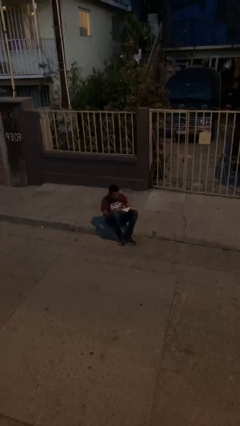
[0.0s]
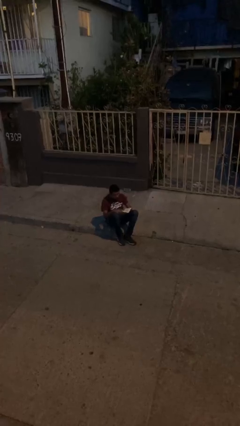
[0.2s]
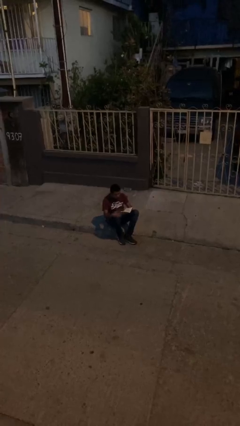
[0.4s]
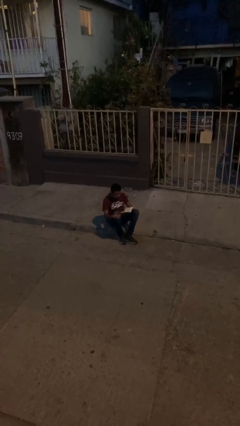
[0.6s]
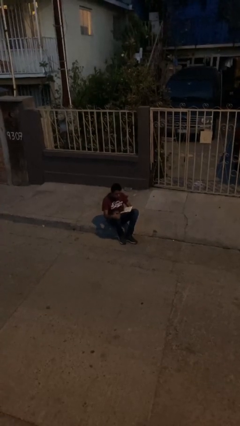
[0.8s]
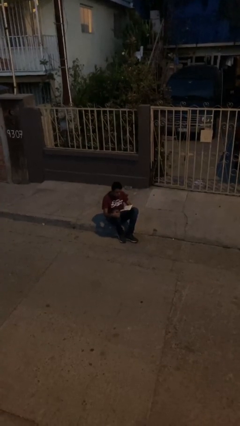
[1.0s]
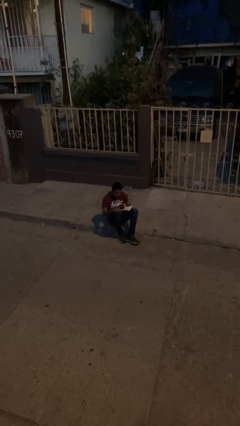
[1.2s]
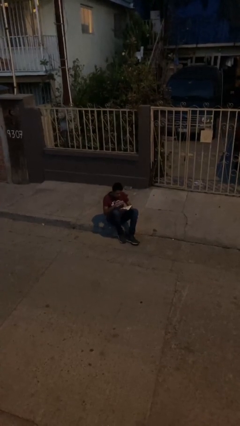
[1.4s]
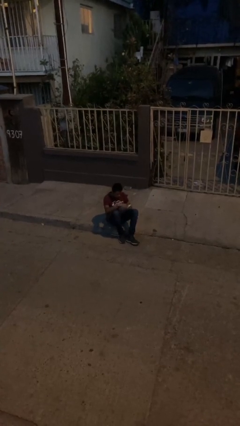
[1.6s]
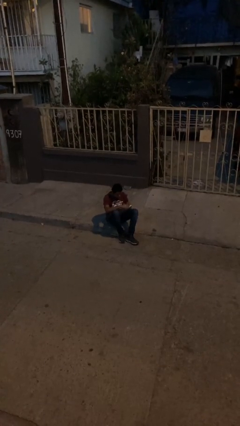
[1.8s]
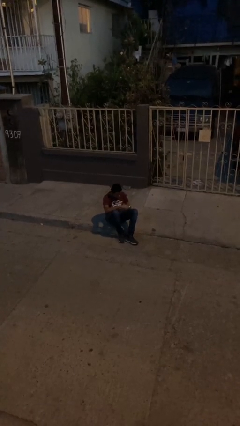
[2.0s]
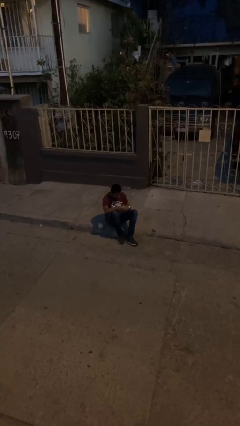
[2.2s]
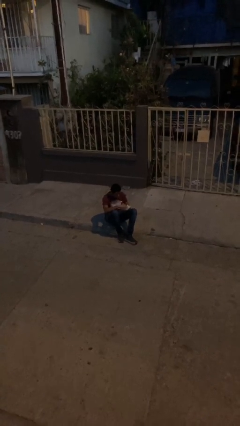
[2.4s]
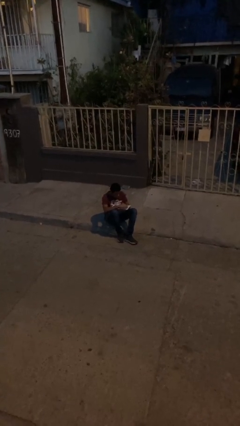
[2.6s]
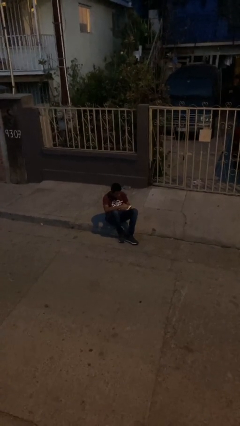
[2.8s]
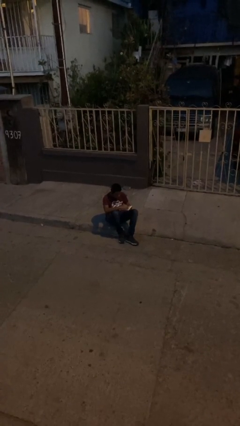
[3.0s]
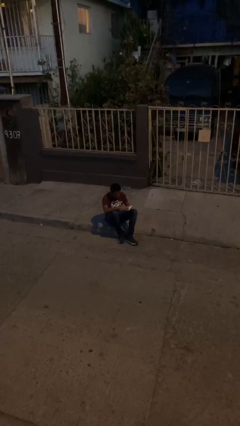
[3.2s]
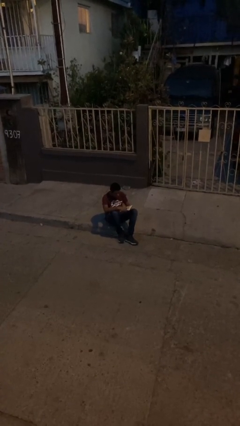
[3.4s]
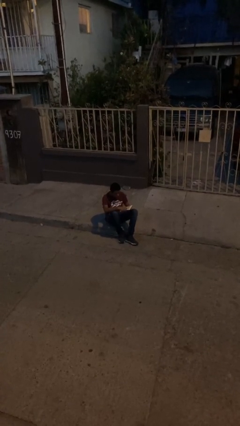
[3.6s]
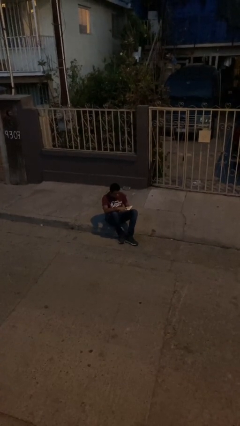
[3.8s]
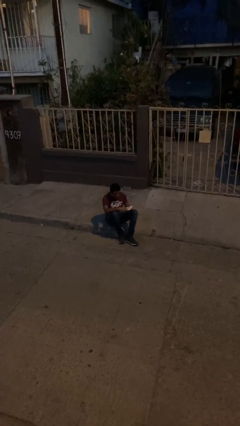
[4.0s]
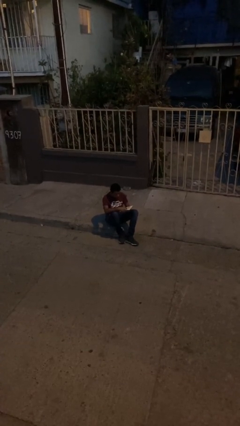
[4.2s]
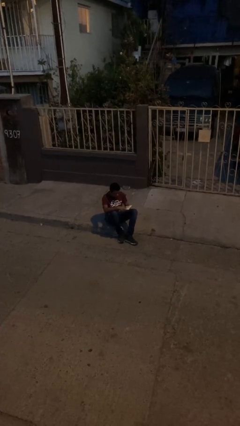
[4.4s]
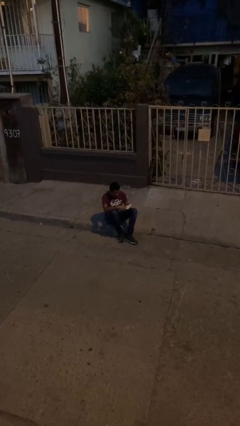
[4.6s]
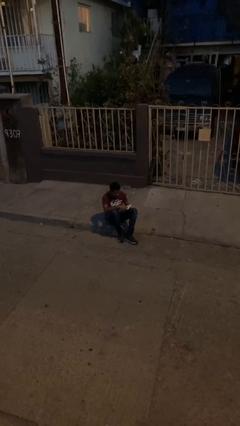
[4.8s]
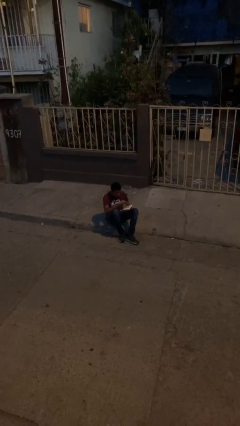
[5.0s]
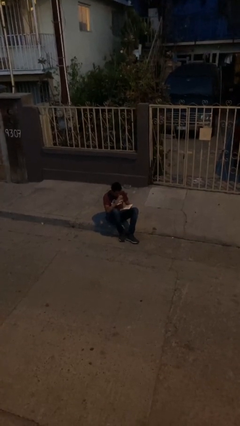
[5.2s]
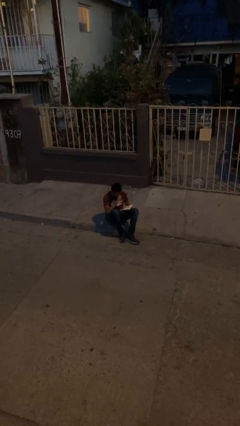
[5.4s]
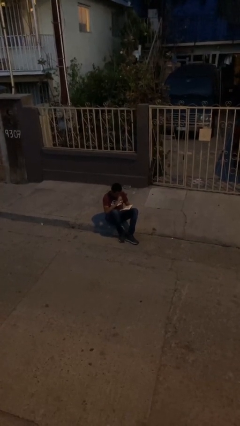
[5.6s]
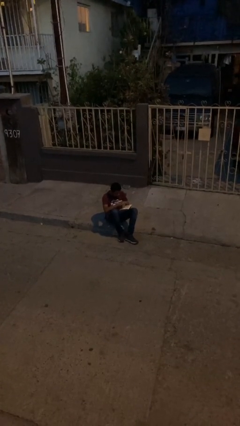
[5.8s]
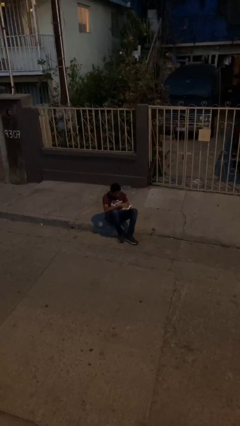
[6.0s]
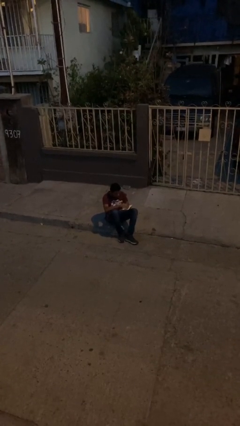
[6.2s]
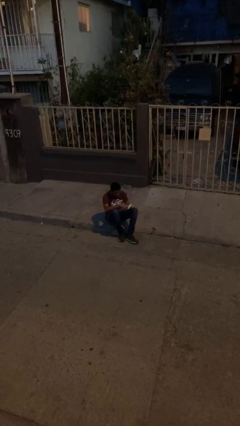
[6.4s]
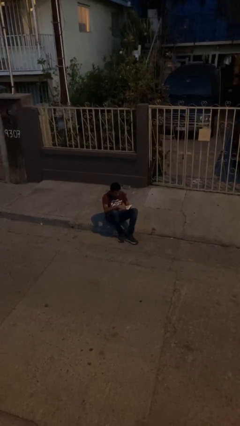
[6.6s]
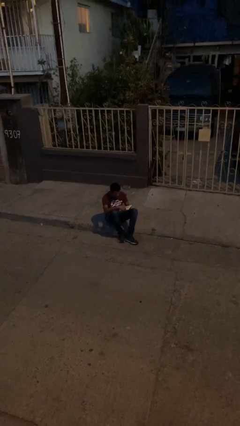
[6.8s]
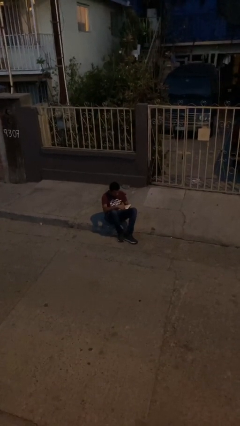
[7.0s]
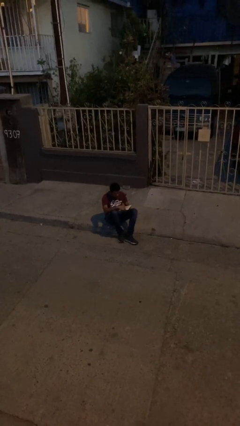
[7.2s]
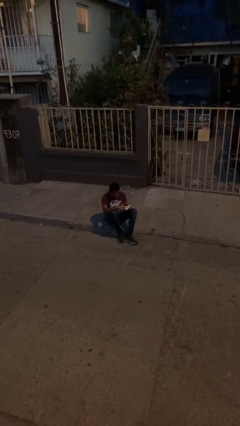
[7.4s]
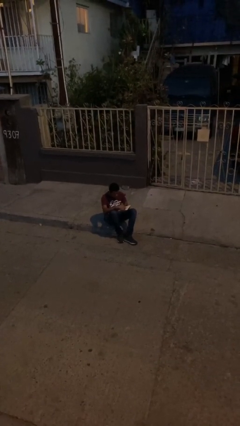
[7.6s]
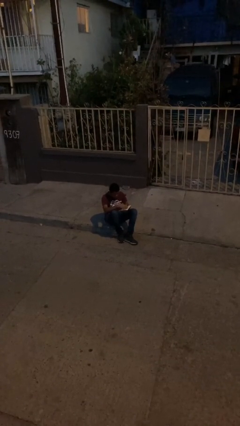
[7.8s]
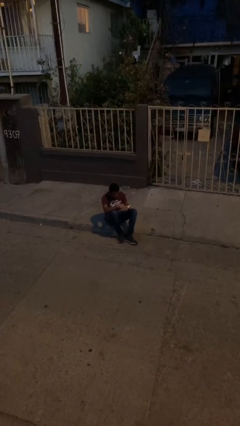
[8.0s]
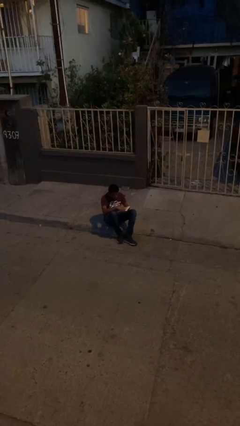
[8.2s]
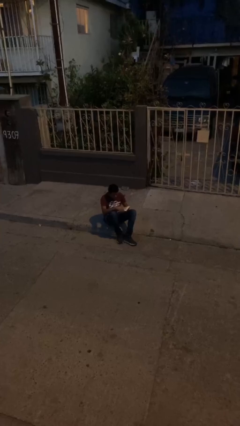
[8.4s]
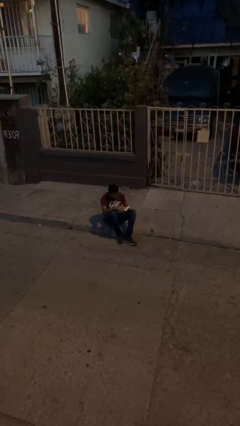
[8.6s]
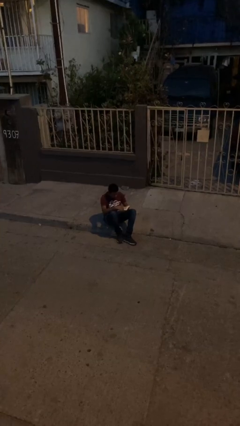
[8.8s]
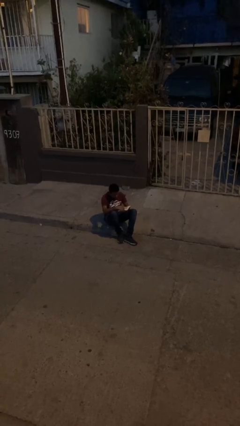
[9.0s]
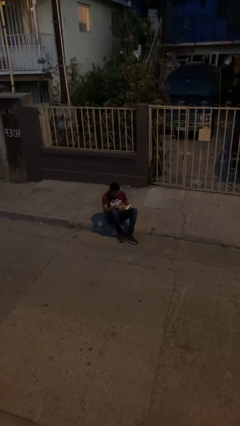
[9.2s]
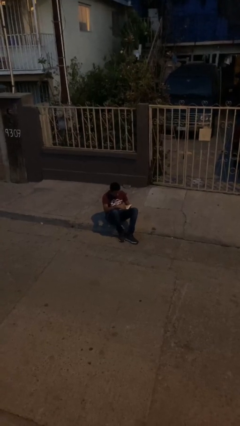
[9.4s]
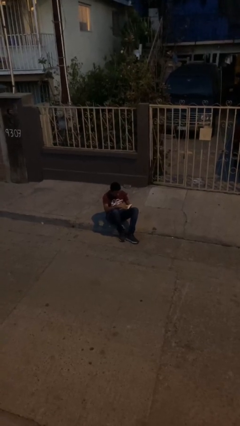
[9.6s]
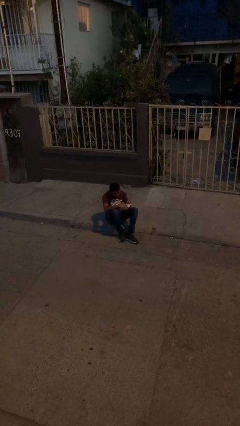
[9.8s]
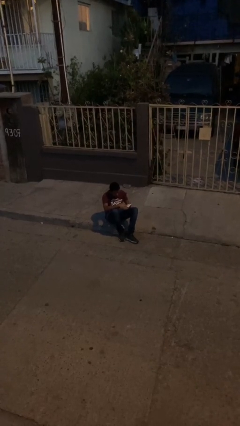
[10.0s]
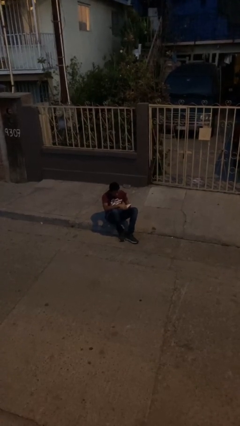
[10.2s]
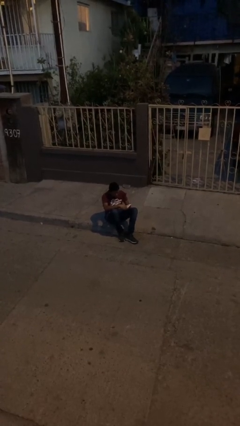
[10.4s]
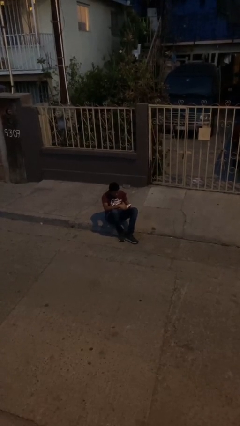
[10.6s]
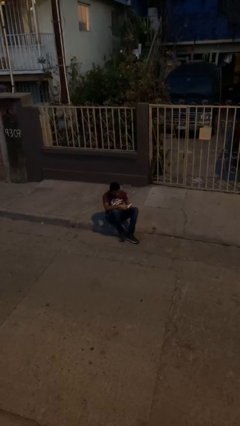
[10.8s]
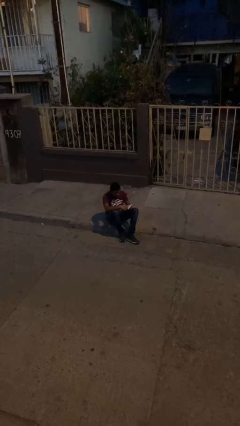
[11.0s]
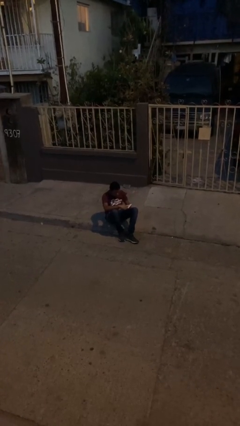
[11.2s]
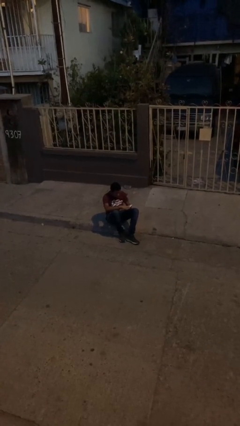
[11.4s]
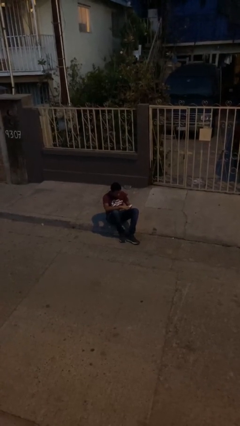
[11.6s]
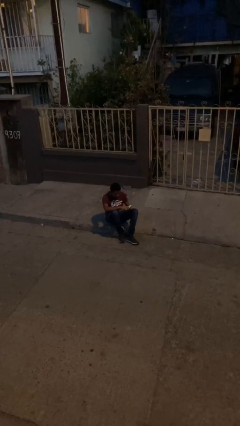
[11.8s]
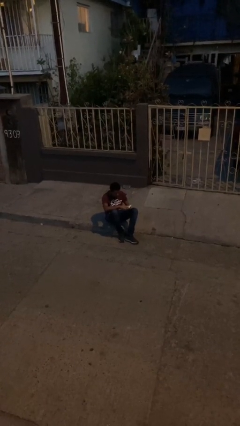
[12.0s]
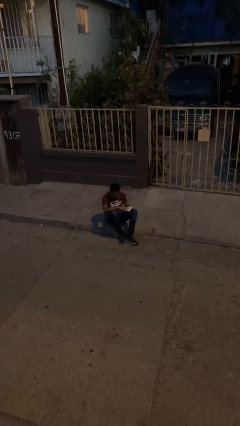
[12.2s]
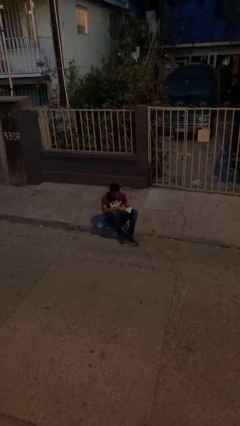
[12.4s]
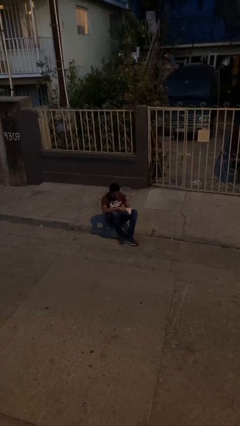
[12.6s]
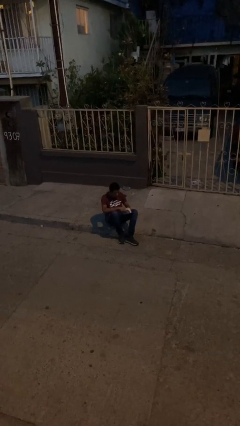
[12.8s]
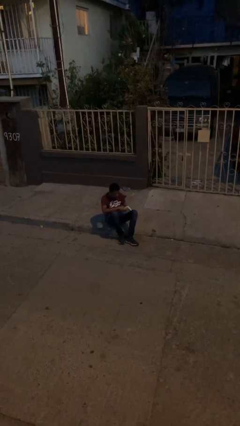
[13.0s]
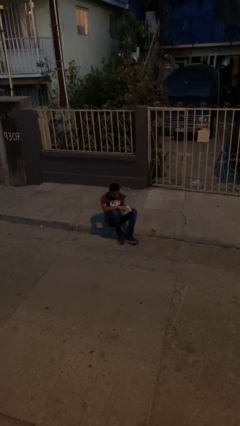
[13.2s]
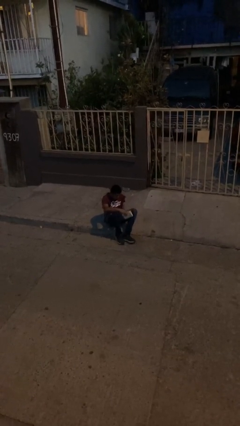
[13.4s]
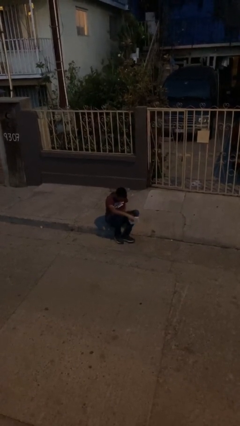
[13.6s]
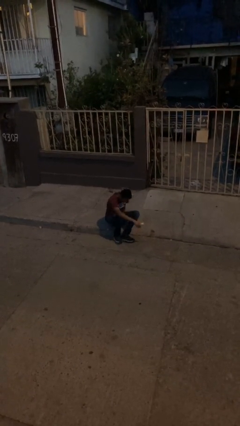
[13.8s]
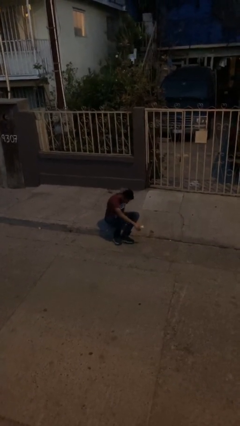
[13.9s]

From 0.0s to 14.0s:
person reads document

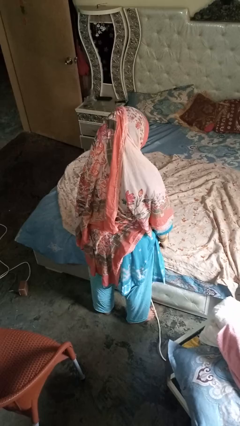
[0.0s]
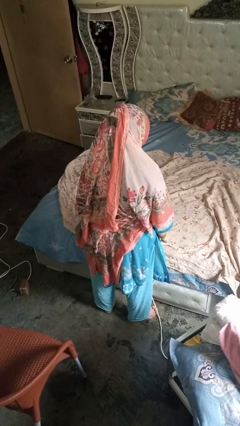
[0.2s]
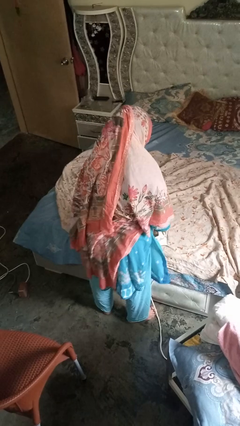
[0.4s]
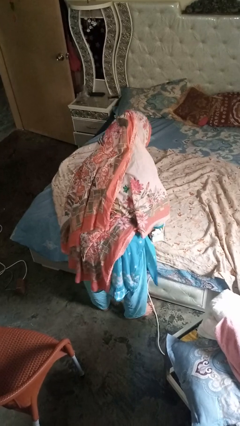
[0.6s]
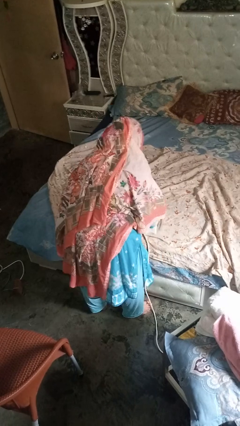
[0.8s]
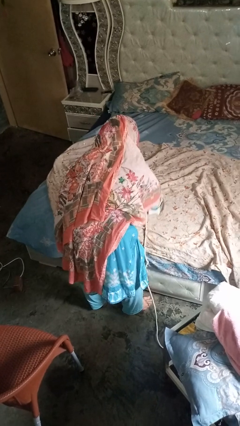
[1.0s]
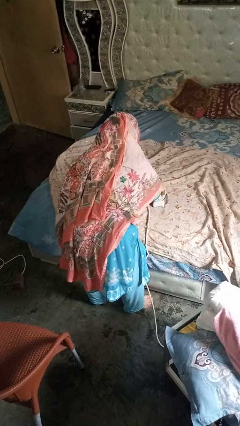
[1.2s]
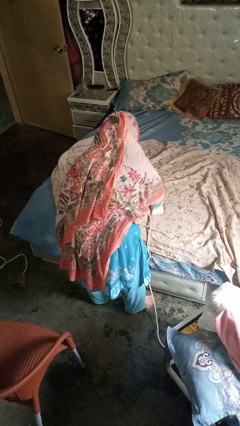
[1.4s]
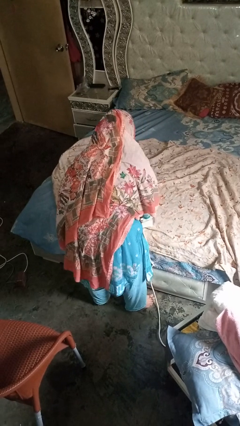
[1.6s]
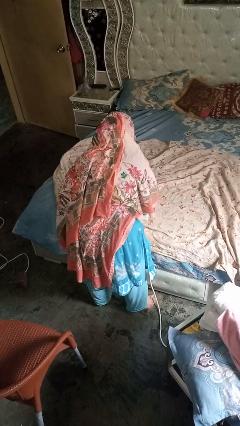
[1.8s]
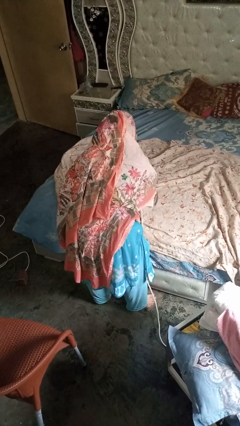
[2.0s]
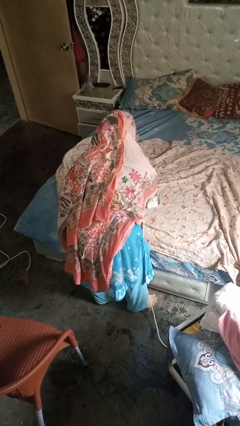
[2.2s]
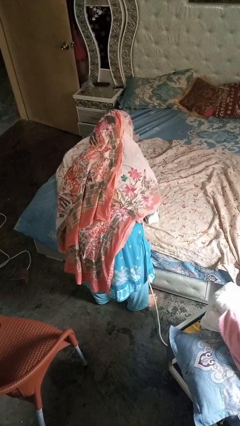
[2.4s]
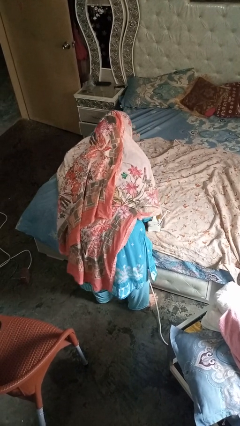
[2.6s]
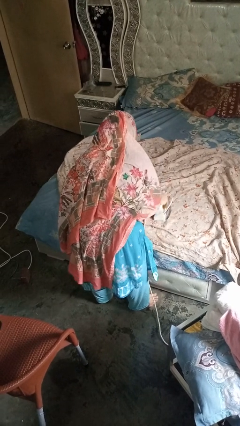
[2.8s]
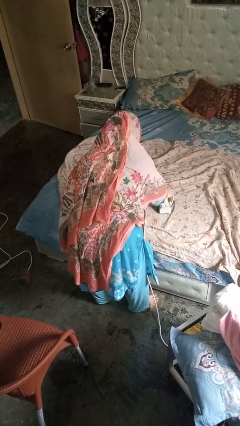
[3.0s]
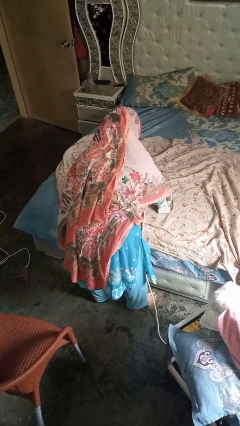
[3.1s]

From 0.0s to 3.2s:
person irons clothes

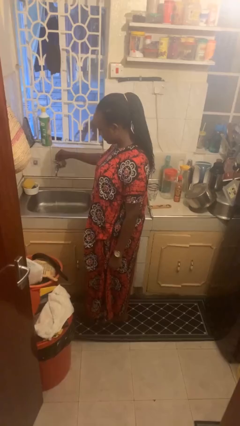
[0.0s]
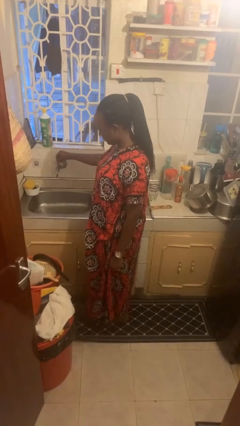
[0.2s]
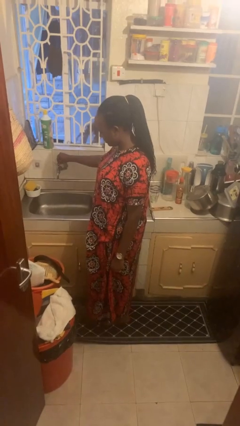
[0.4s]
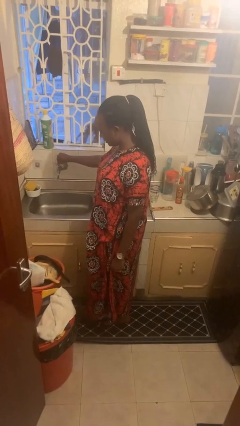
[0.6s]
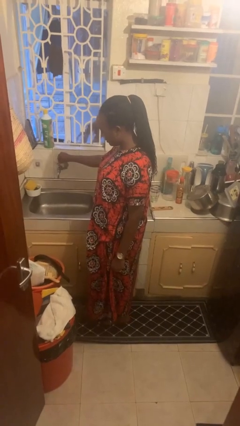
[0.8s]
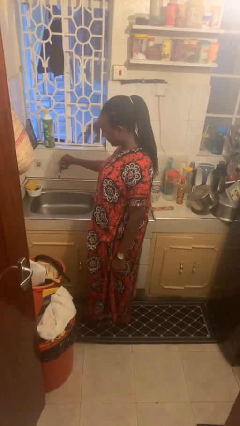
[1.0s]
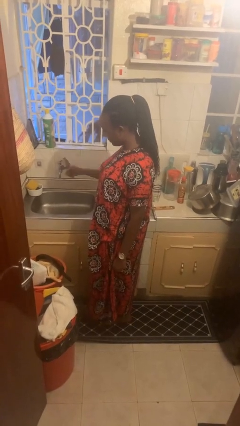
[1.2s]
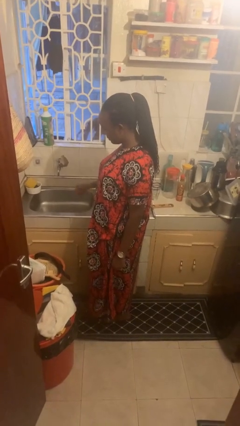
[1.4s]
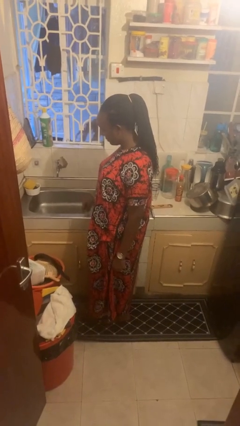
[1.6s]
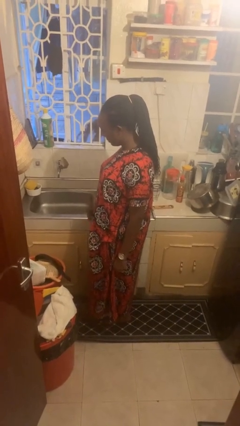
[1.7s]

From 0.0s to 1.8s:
person turns off faucet
